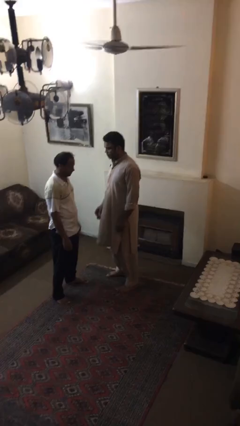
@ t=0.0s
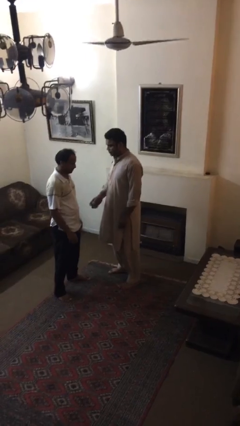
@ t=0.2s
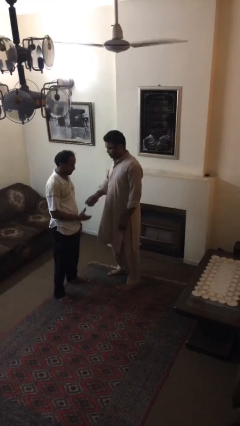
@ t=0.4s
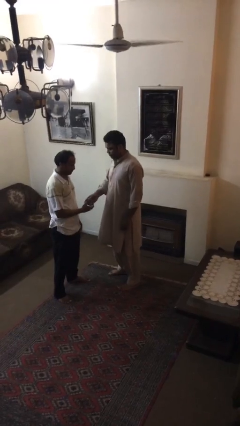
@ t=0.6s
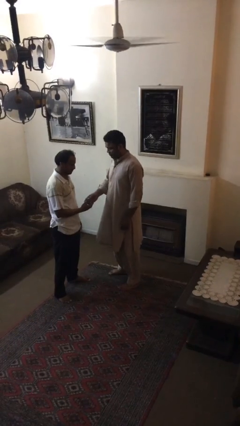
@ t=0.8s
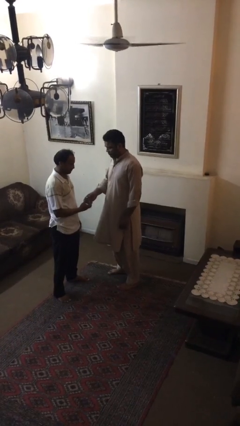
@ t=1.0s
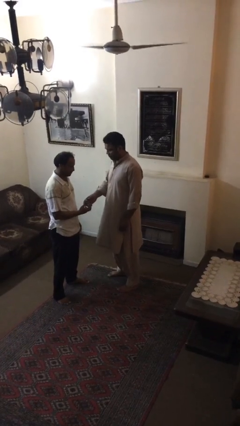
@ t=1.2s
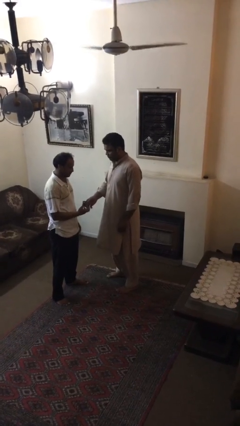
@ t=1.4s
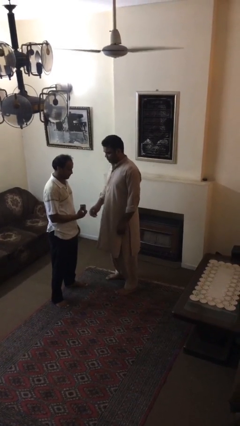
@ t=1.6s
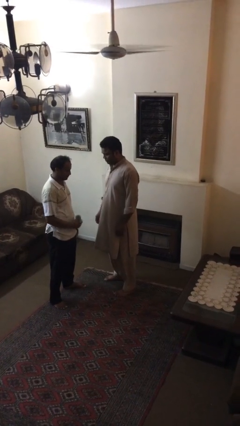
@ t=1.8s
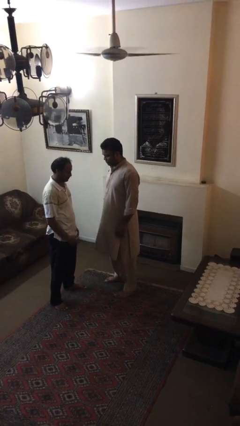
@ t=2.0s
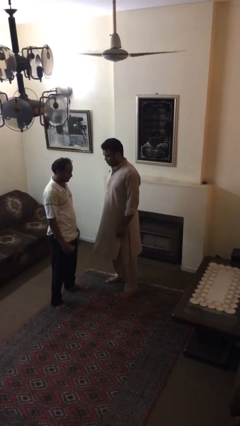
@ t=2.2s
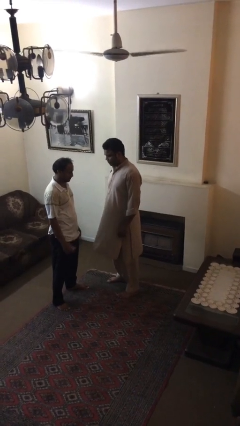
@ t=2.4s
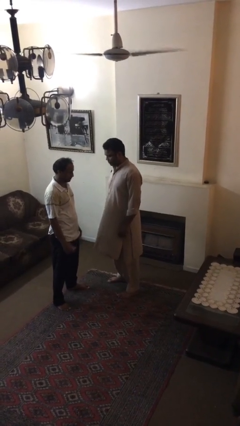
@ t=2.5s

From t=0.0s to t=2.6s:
person transfers object to person

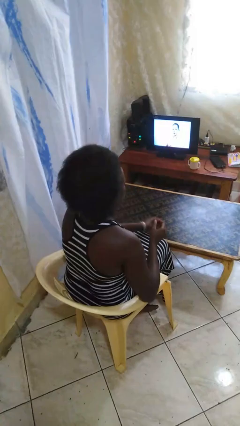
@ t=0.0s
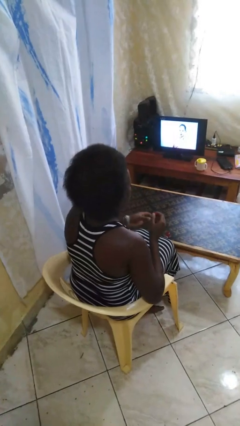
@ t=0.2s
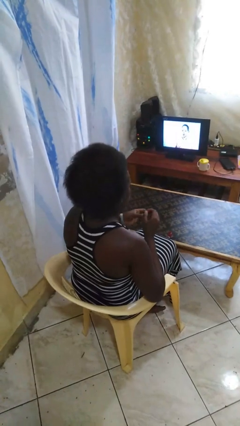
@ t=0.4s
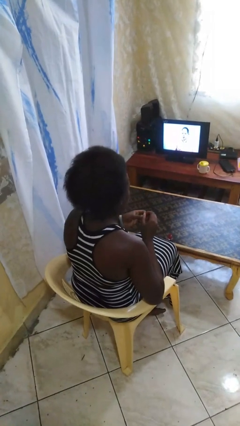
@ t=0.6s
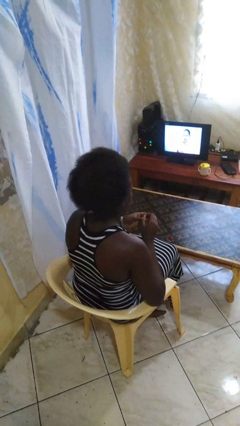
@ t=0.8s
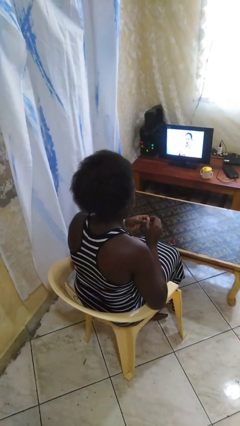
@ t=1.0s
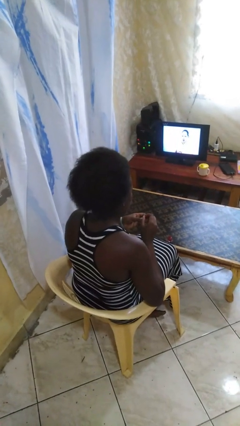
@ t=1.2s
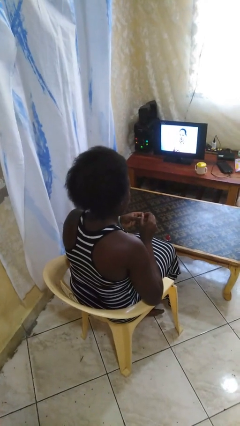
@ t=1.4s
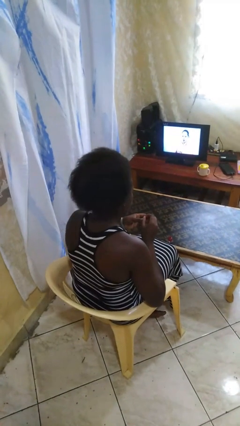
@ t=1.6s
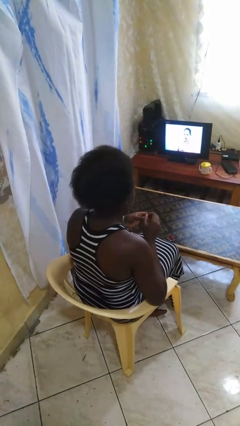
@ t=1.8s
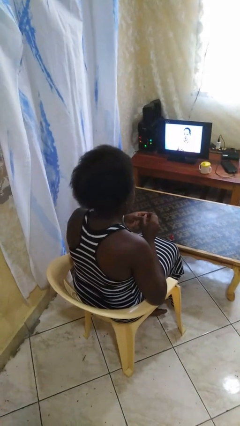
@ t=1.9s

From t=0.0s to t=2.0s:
person paints fingernails

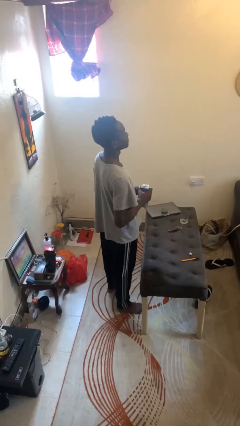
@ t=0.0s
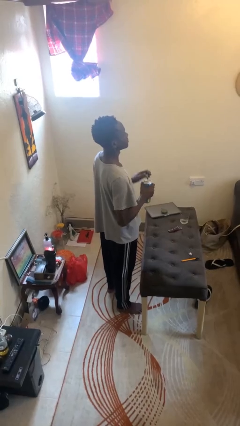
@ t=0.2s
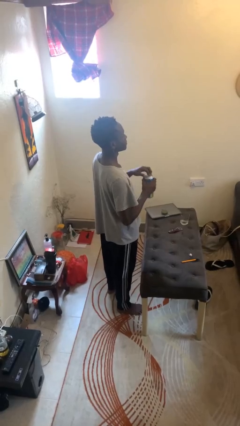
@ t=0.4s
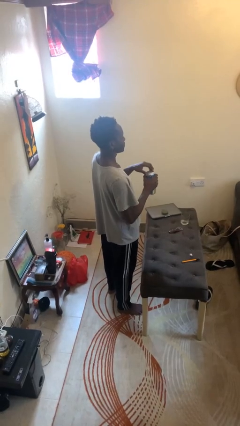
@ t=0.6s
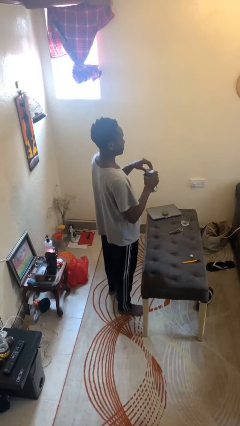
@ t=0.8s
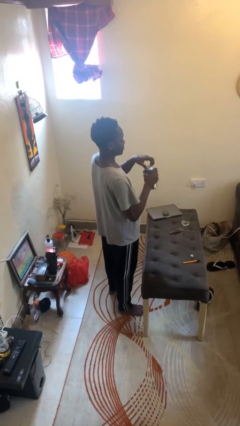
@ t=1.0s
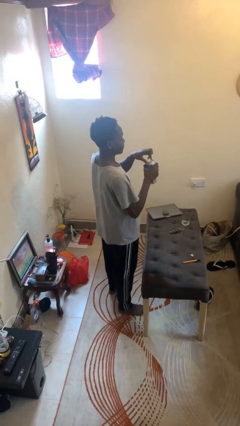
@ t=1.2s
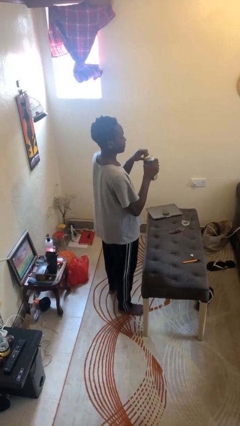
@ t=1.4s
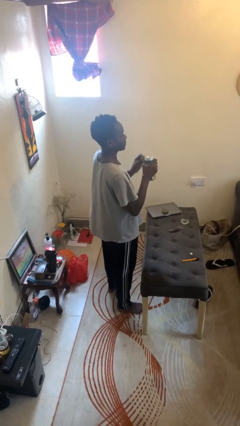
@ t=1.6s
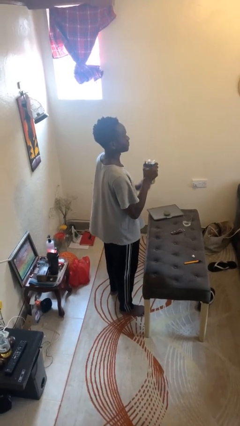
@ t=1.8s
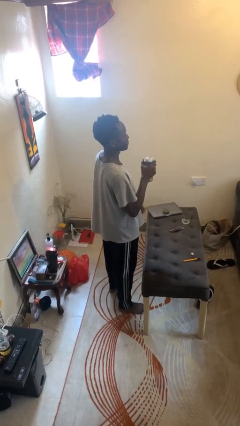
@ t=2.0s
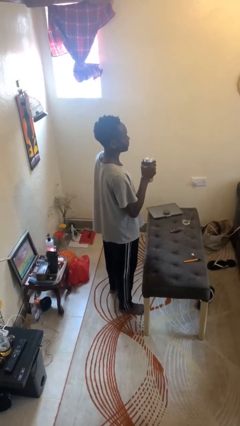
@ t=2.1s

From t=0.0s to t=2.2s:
person opens beverage can

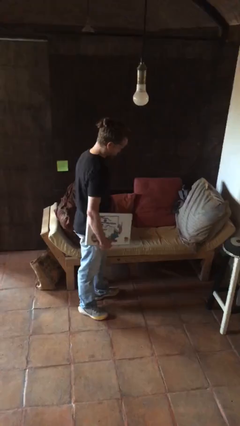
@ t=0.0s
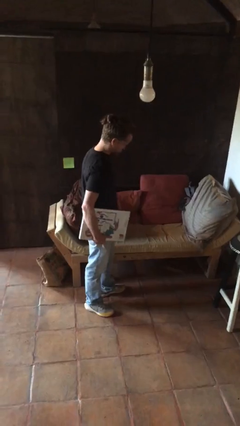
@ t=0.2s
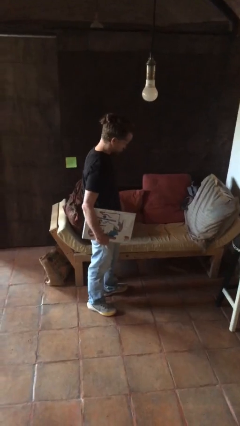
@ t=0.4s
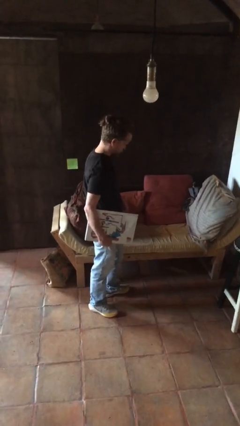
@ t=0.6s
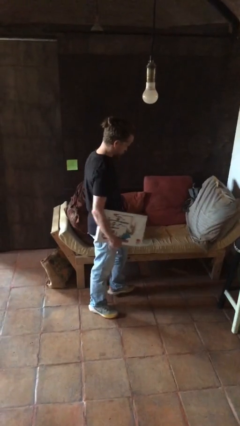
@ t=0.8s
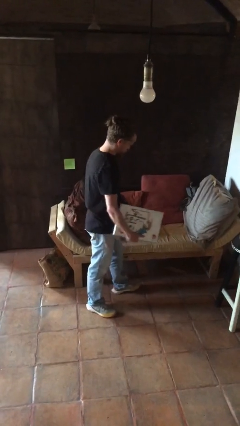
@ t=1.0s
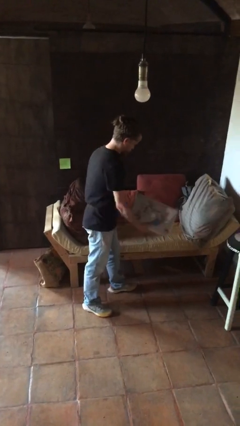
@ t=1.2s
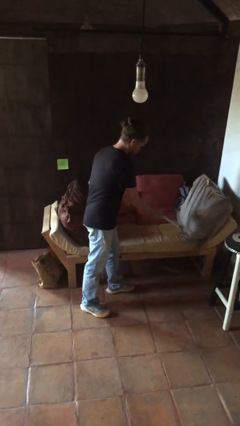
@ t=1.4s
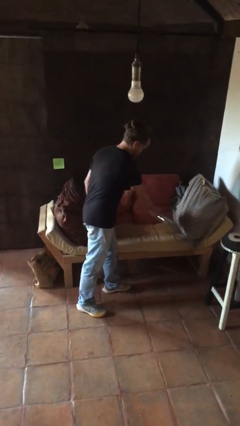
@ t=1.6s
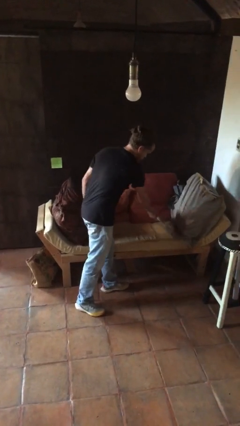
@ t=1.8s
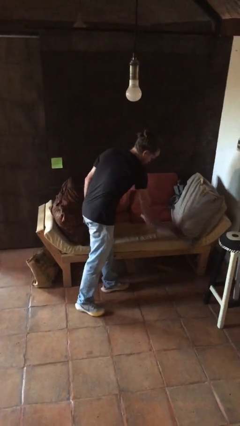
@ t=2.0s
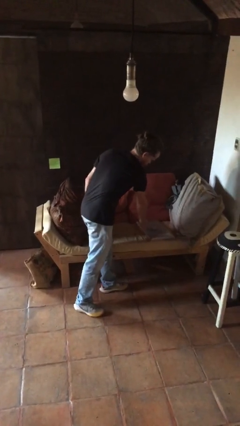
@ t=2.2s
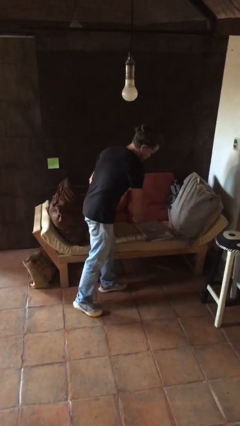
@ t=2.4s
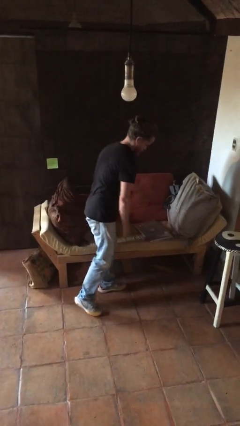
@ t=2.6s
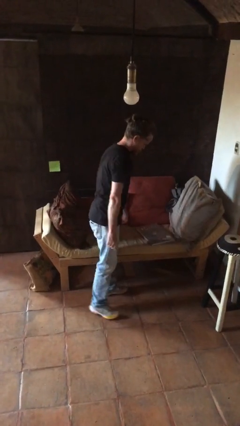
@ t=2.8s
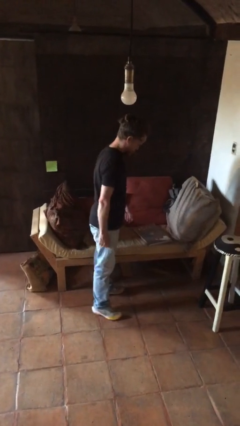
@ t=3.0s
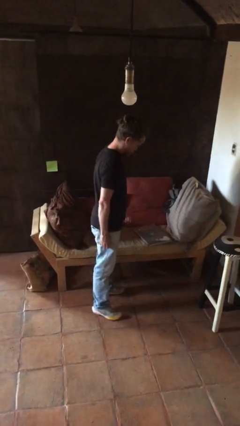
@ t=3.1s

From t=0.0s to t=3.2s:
person puts down object on couch

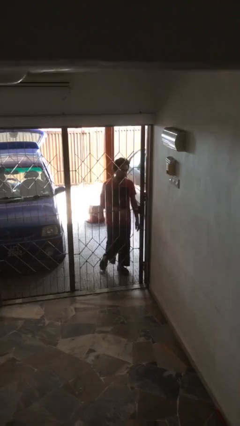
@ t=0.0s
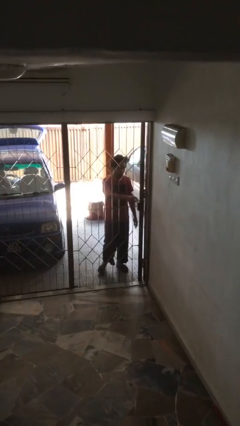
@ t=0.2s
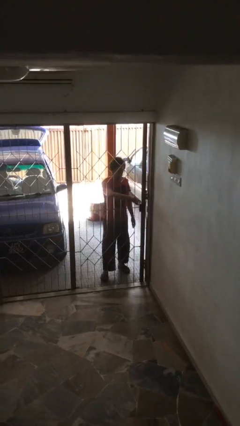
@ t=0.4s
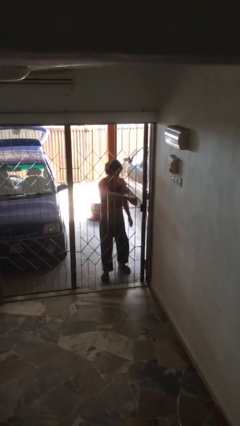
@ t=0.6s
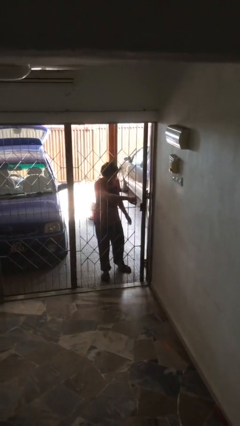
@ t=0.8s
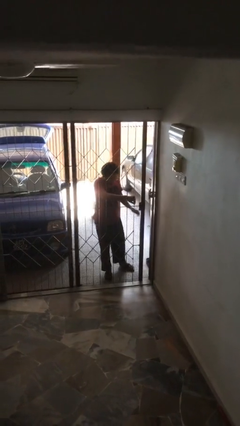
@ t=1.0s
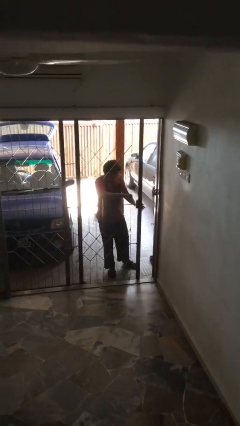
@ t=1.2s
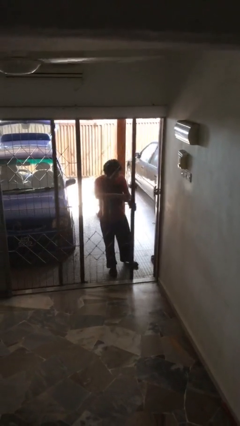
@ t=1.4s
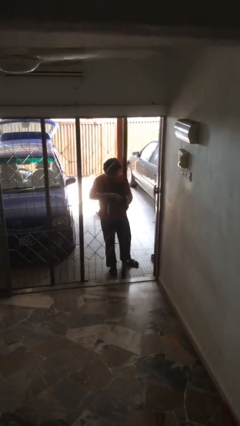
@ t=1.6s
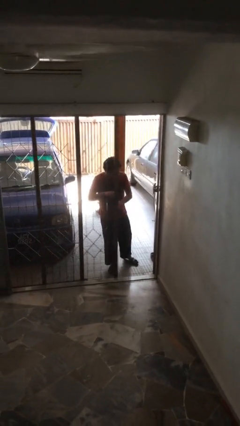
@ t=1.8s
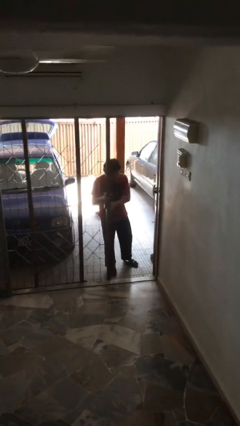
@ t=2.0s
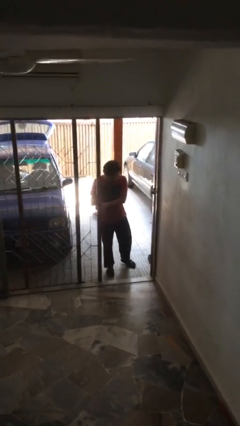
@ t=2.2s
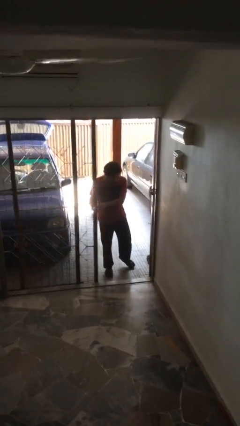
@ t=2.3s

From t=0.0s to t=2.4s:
person opens facility door

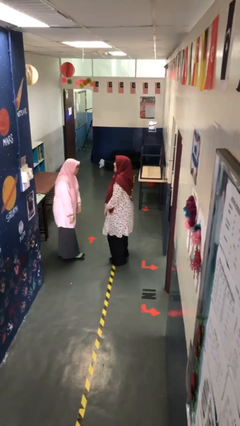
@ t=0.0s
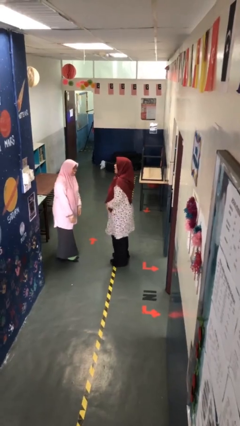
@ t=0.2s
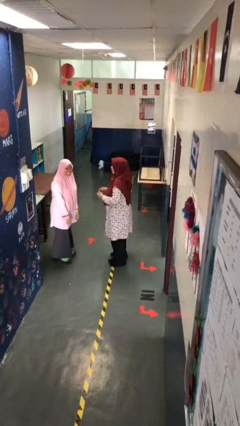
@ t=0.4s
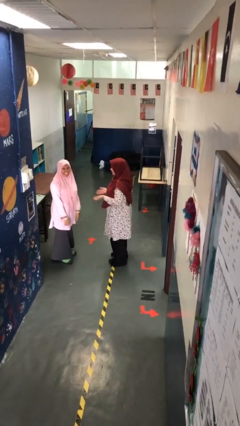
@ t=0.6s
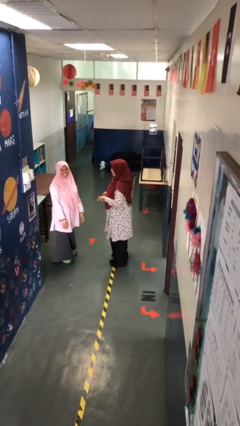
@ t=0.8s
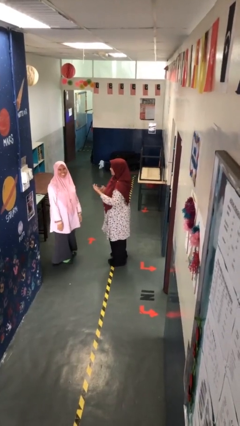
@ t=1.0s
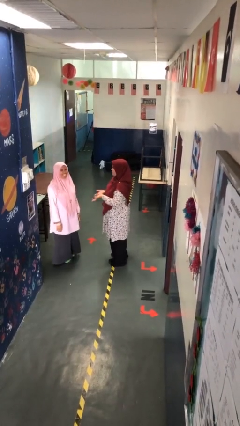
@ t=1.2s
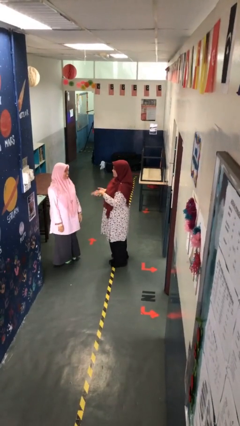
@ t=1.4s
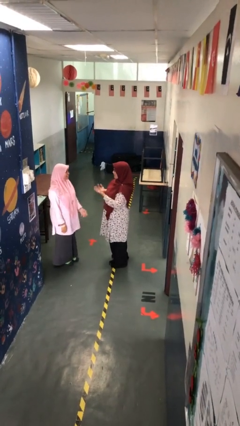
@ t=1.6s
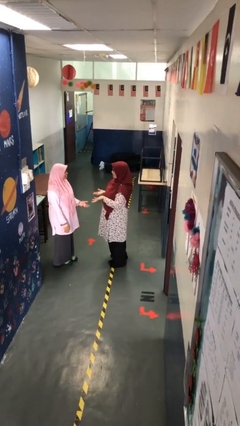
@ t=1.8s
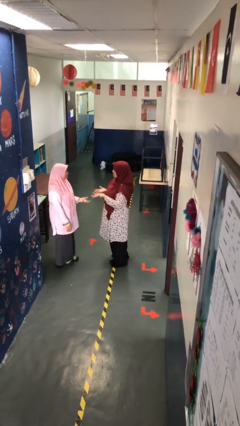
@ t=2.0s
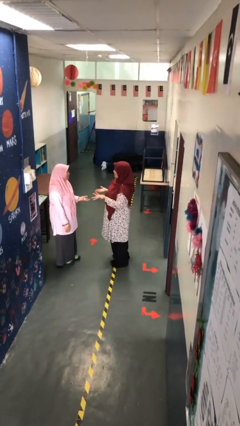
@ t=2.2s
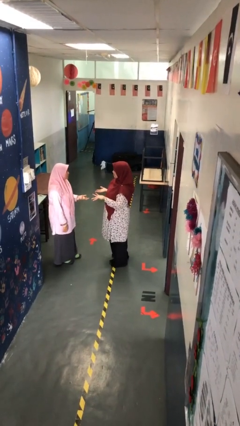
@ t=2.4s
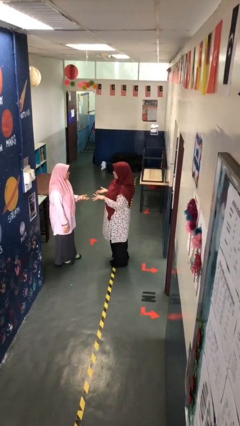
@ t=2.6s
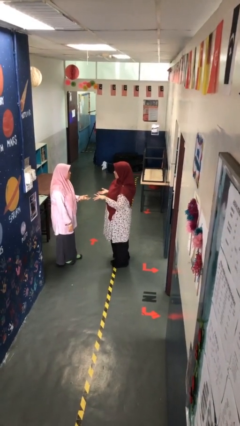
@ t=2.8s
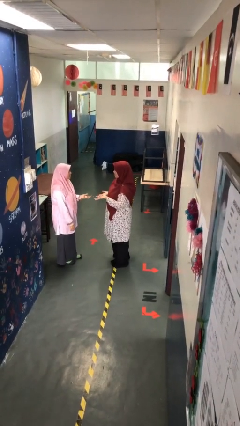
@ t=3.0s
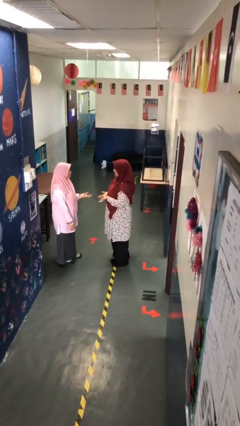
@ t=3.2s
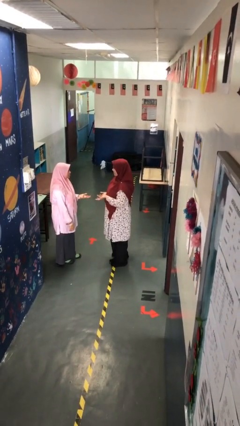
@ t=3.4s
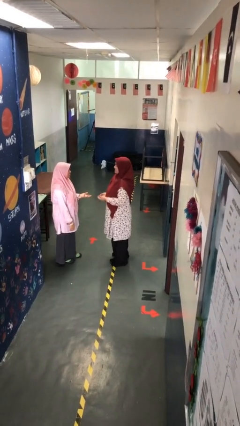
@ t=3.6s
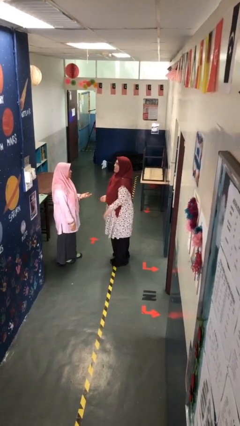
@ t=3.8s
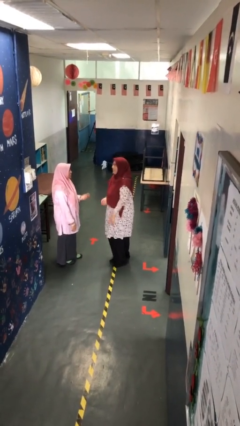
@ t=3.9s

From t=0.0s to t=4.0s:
person talks to person

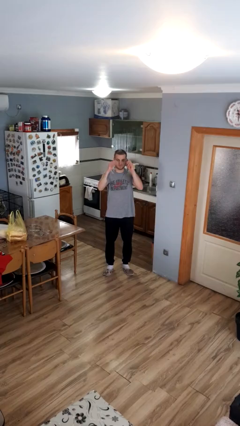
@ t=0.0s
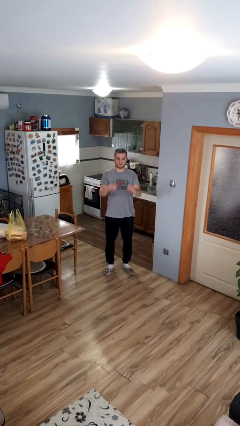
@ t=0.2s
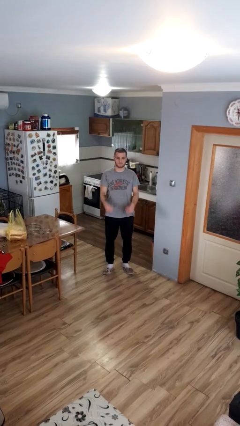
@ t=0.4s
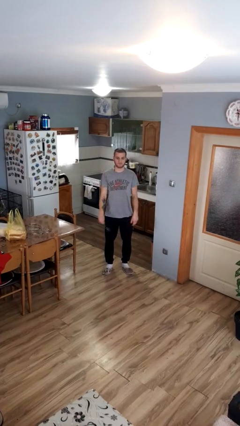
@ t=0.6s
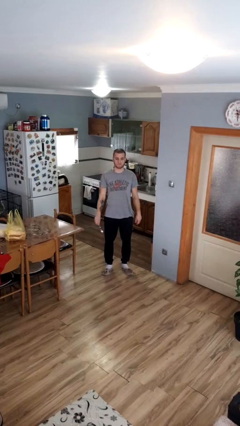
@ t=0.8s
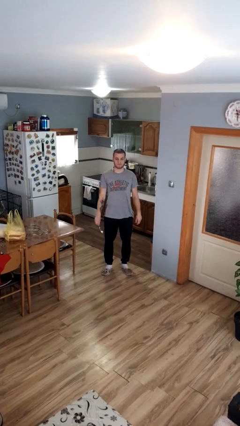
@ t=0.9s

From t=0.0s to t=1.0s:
person takes off glasses
